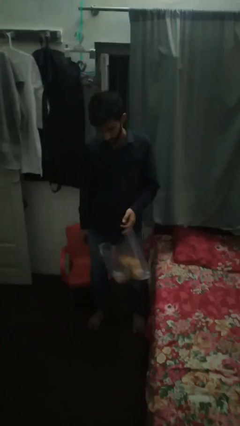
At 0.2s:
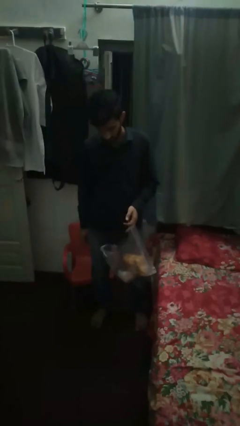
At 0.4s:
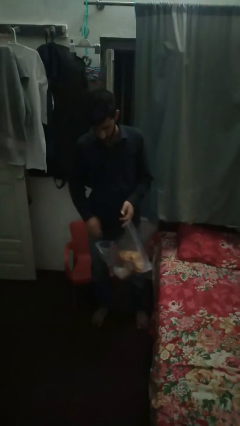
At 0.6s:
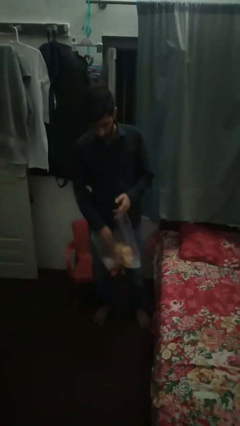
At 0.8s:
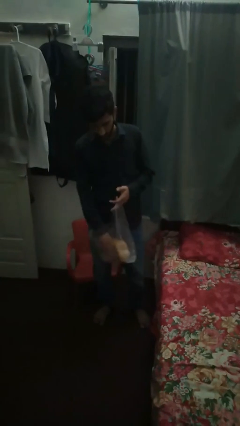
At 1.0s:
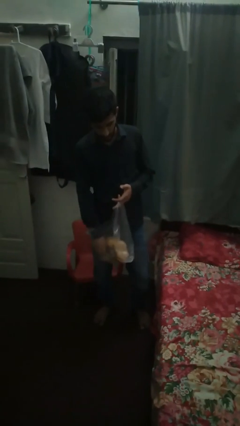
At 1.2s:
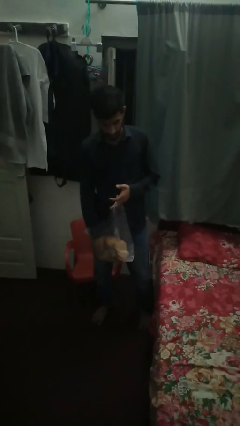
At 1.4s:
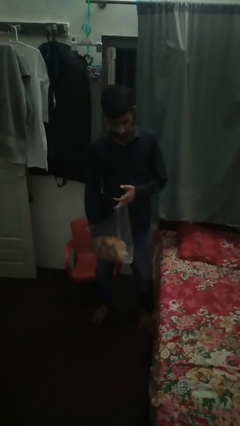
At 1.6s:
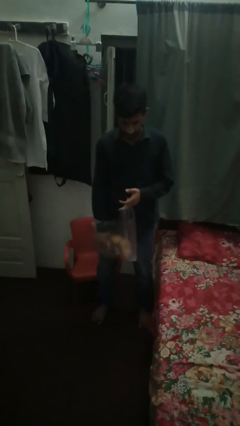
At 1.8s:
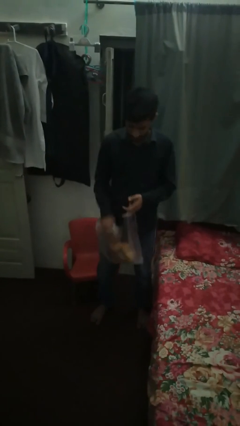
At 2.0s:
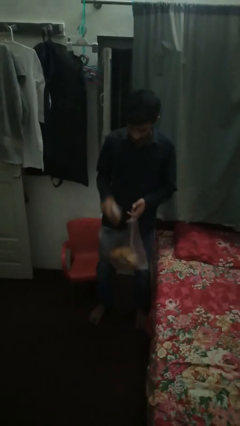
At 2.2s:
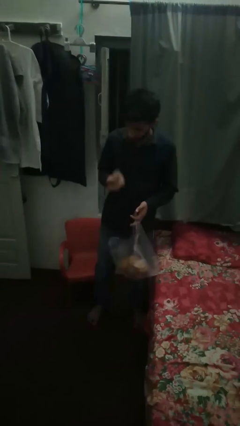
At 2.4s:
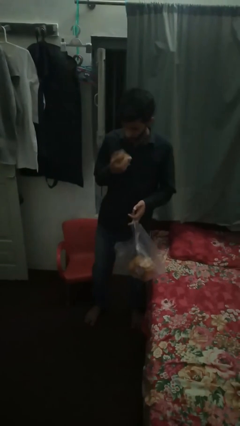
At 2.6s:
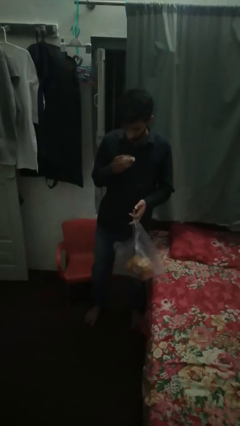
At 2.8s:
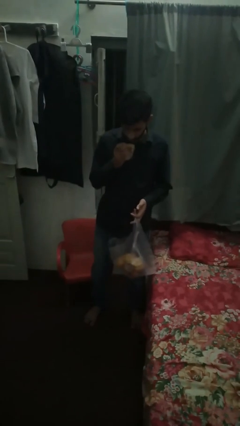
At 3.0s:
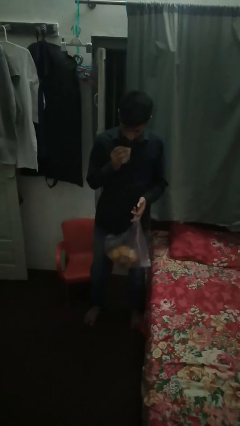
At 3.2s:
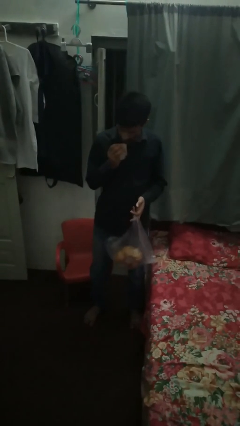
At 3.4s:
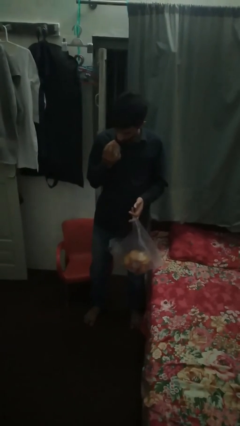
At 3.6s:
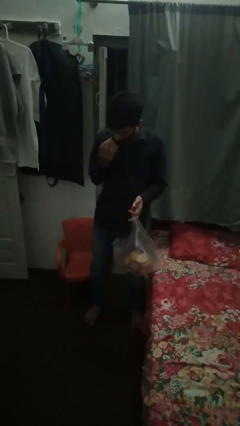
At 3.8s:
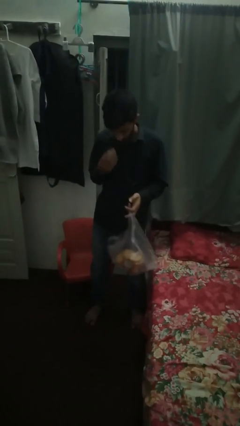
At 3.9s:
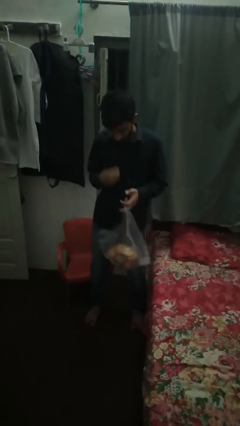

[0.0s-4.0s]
person eats snack from bag

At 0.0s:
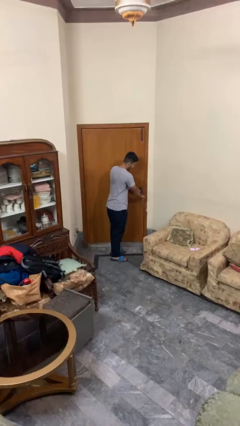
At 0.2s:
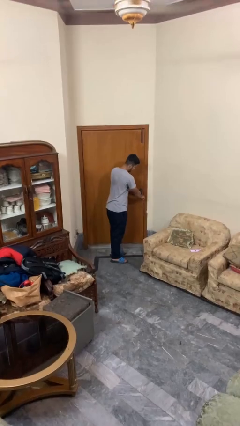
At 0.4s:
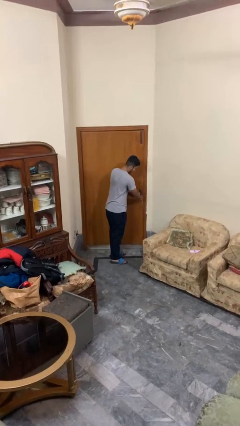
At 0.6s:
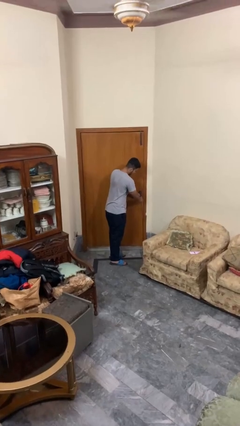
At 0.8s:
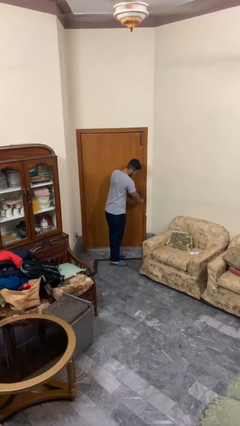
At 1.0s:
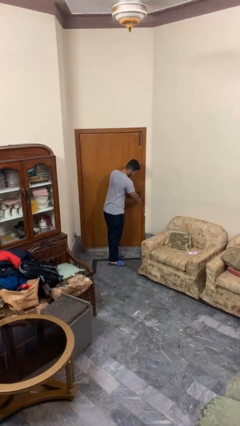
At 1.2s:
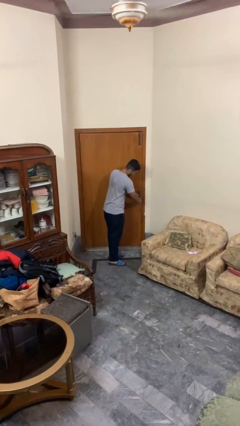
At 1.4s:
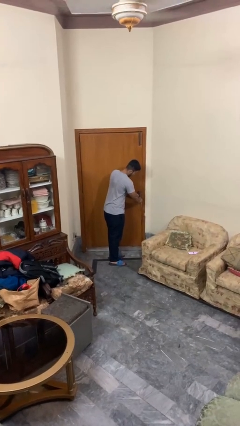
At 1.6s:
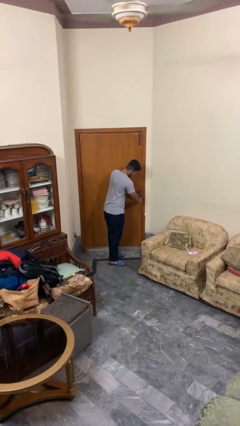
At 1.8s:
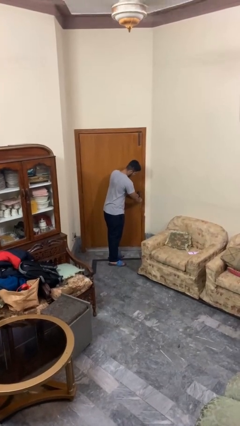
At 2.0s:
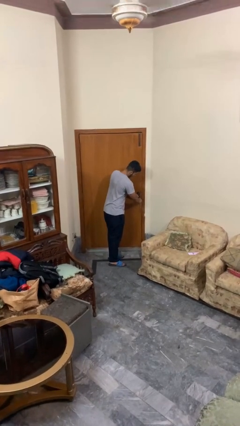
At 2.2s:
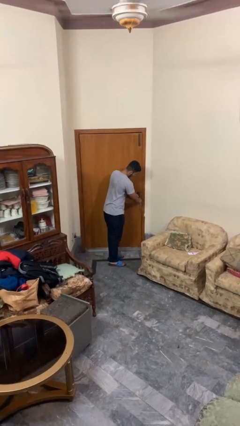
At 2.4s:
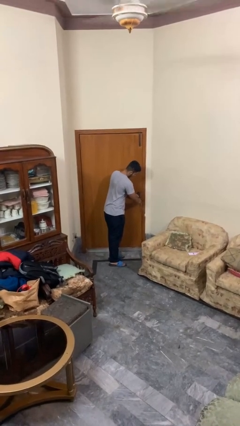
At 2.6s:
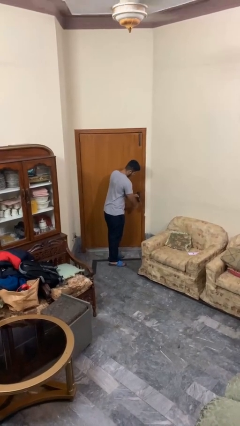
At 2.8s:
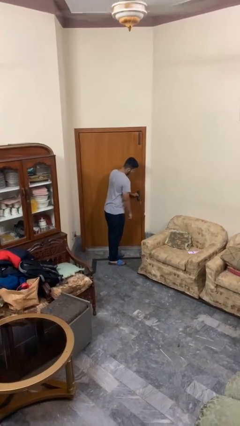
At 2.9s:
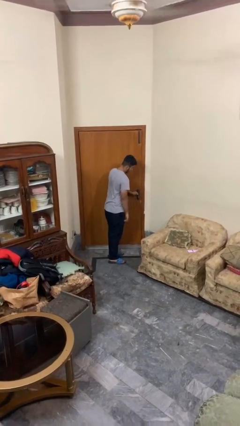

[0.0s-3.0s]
person locks door with keys

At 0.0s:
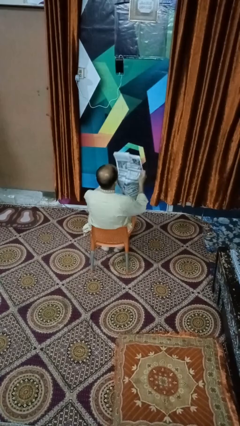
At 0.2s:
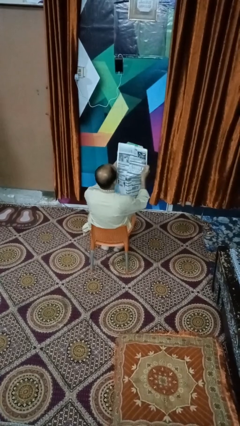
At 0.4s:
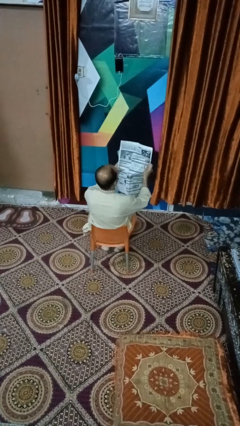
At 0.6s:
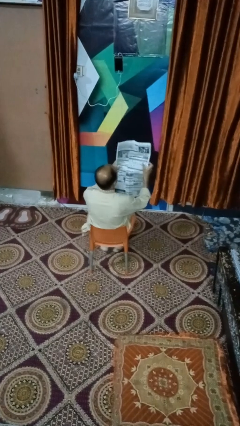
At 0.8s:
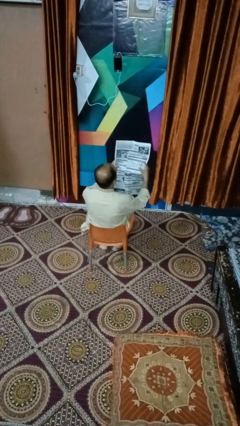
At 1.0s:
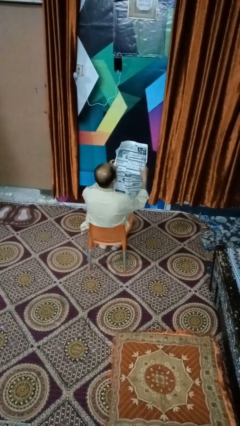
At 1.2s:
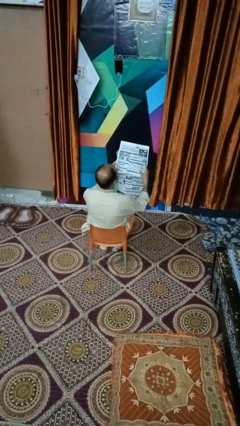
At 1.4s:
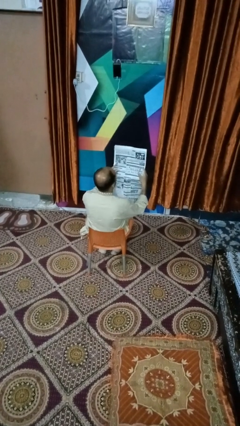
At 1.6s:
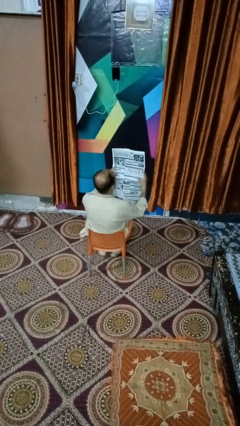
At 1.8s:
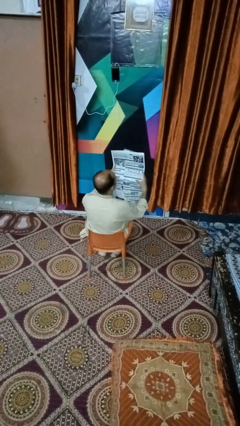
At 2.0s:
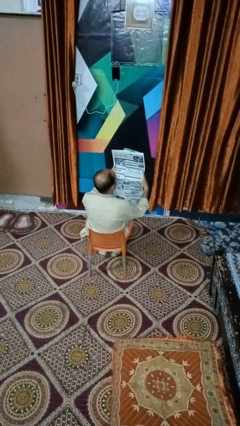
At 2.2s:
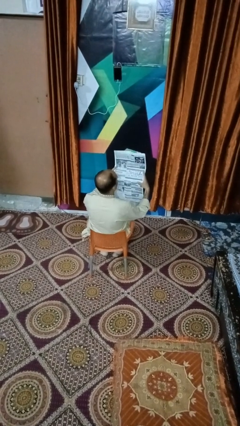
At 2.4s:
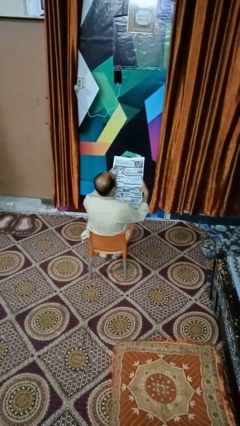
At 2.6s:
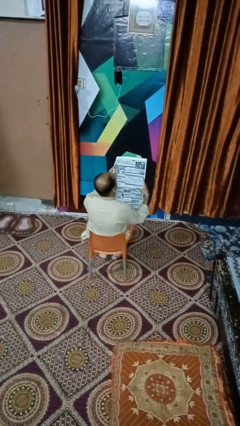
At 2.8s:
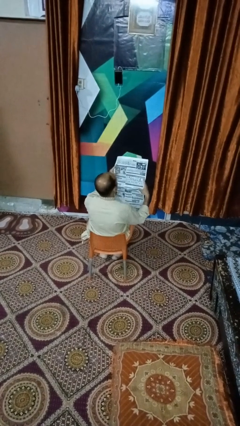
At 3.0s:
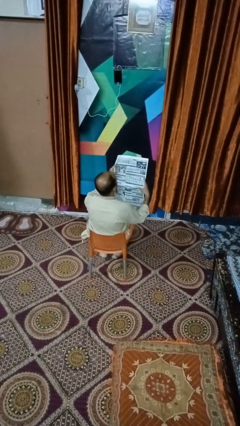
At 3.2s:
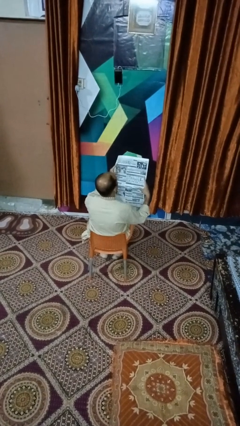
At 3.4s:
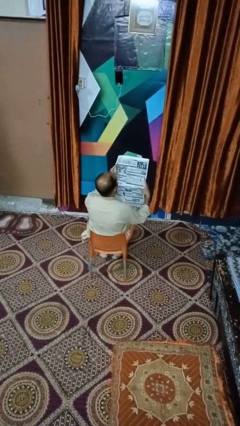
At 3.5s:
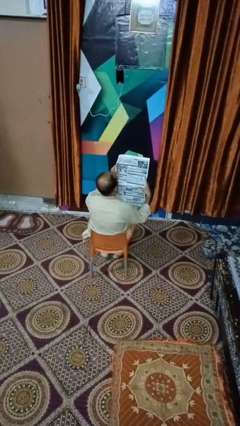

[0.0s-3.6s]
person reads newspaper

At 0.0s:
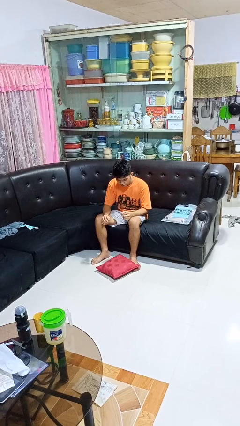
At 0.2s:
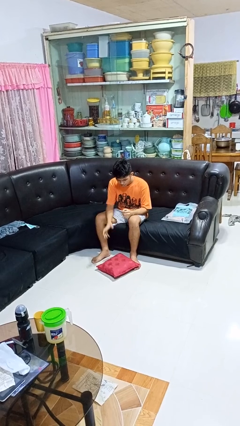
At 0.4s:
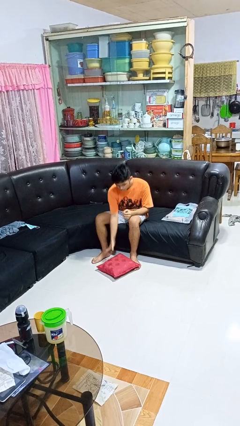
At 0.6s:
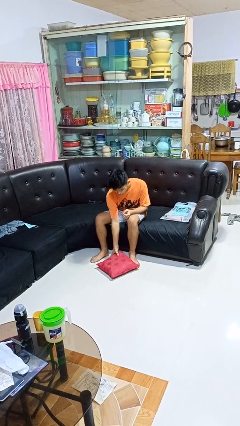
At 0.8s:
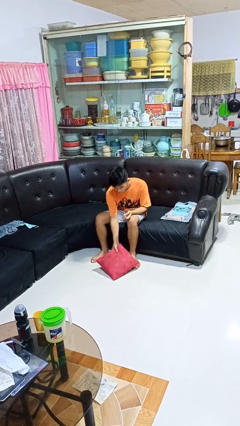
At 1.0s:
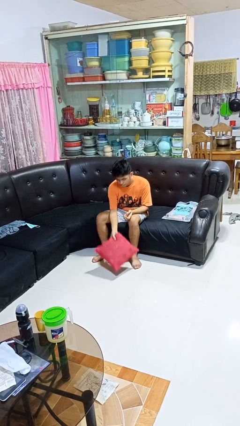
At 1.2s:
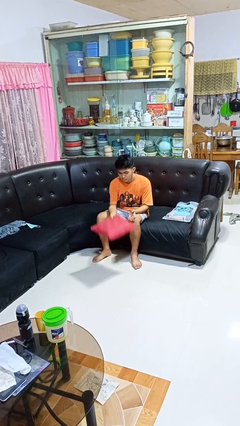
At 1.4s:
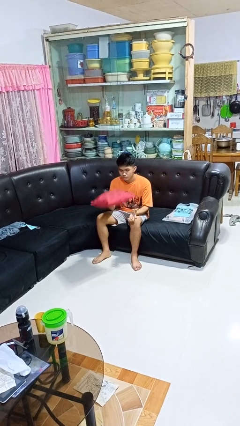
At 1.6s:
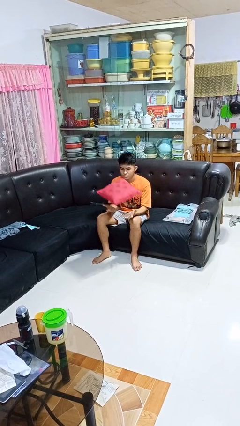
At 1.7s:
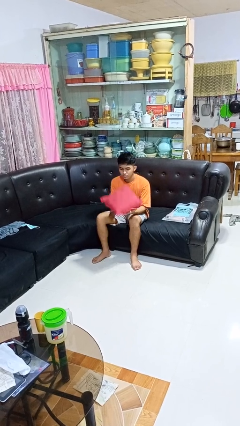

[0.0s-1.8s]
person picks up object from floor

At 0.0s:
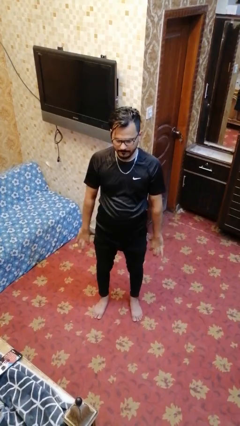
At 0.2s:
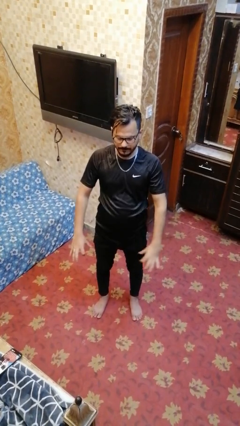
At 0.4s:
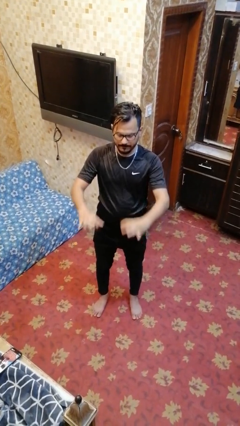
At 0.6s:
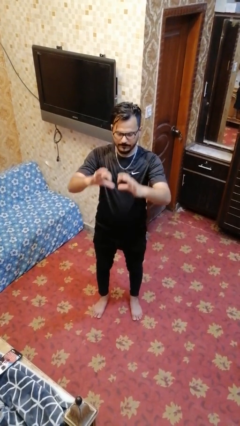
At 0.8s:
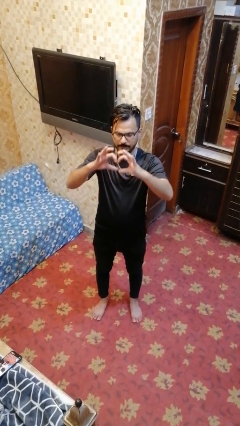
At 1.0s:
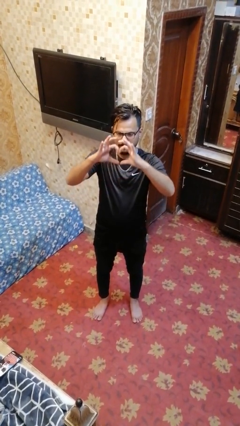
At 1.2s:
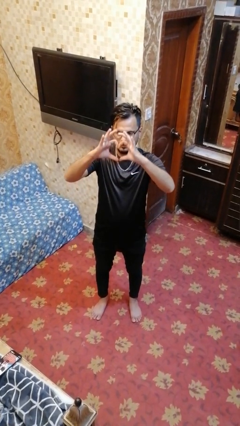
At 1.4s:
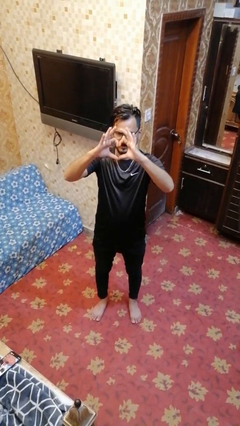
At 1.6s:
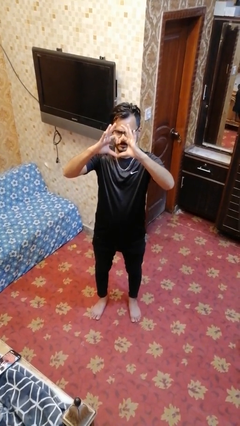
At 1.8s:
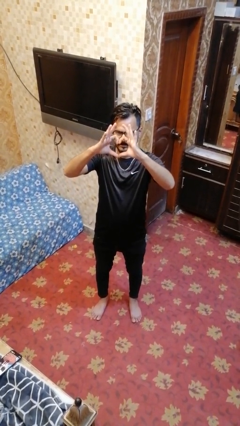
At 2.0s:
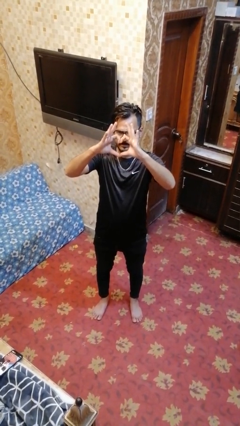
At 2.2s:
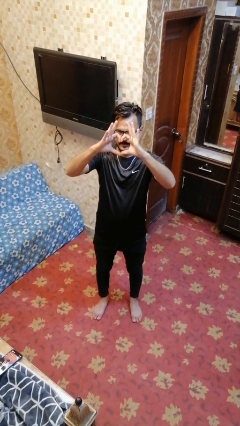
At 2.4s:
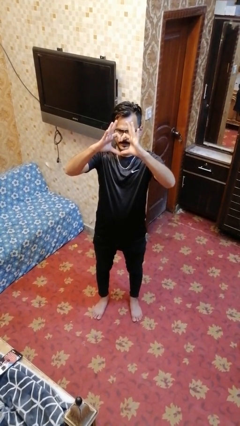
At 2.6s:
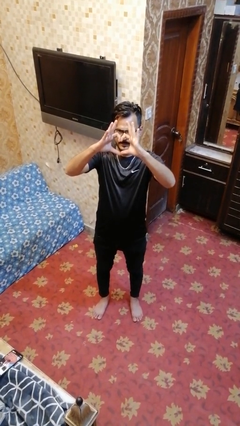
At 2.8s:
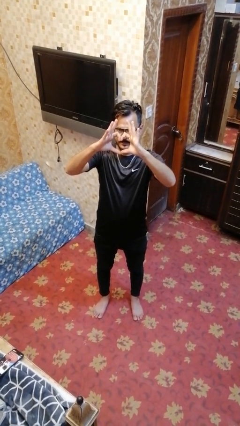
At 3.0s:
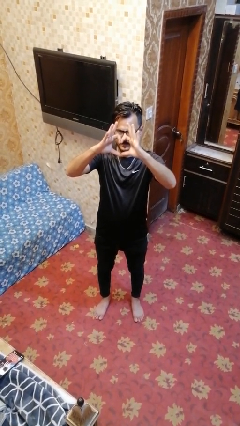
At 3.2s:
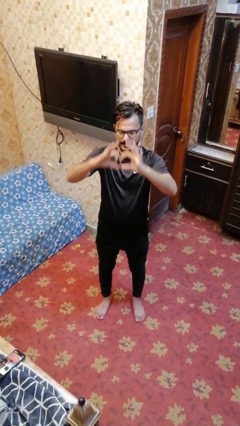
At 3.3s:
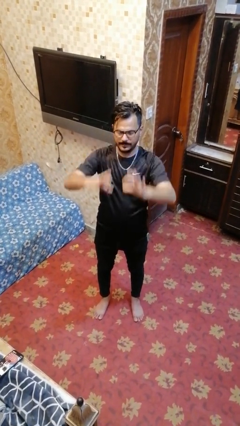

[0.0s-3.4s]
person gestures heart

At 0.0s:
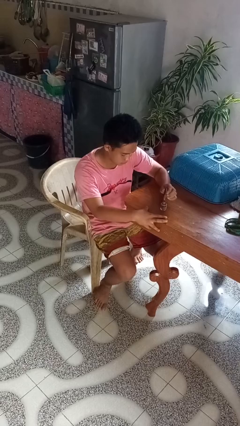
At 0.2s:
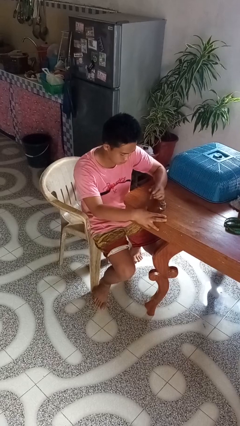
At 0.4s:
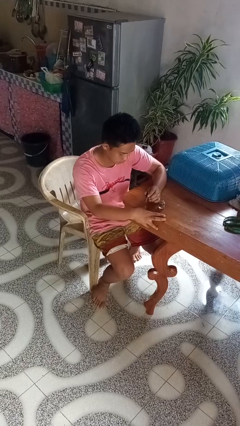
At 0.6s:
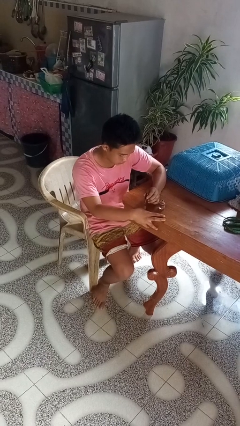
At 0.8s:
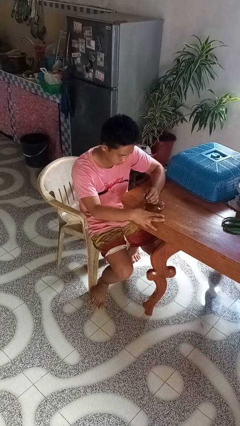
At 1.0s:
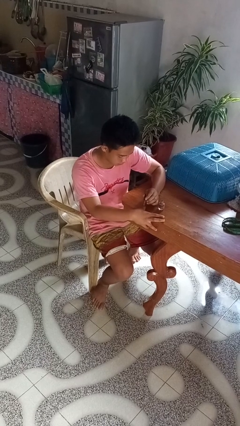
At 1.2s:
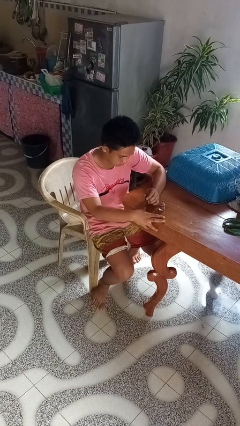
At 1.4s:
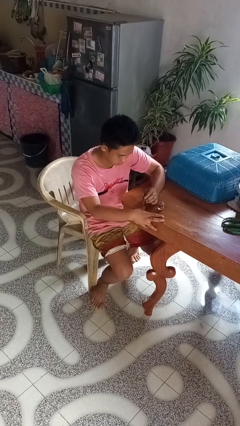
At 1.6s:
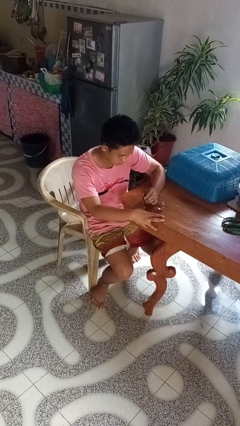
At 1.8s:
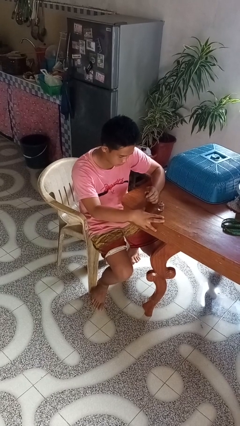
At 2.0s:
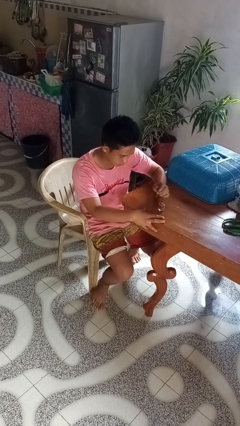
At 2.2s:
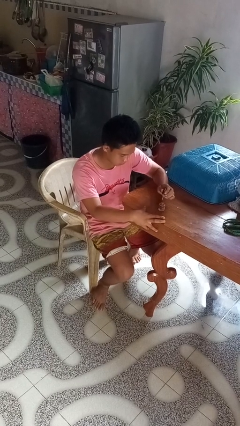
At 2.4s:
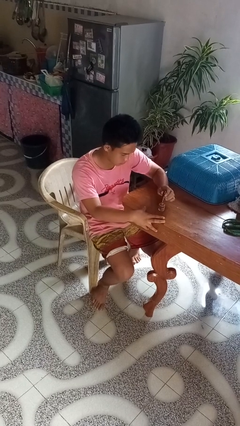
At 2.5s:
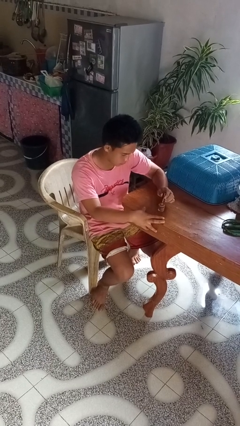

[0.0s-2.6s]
person paints fingernails
